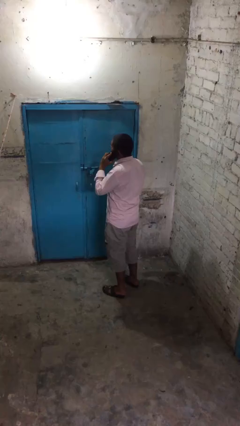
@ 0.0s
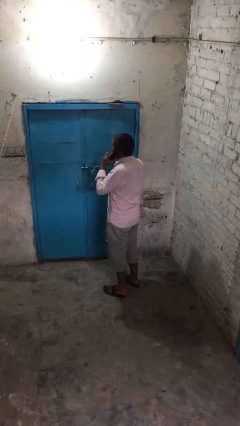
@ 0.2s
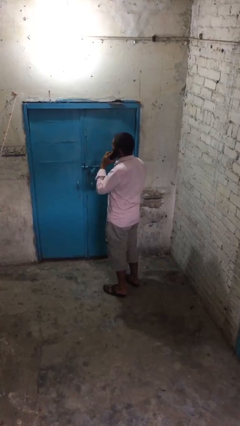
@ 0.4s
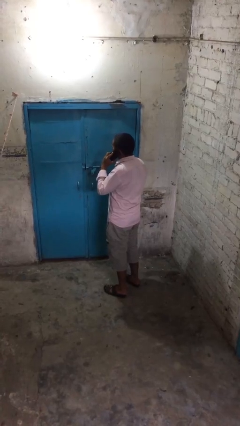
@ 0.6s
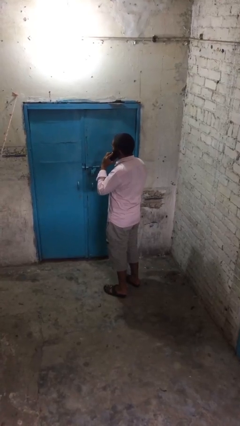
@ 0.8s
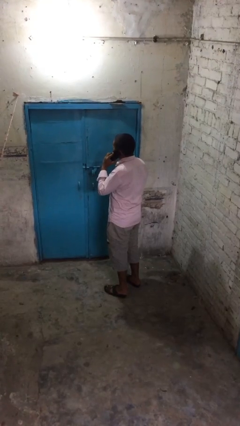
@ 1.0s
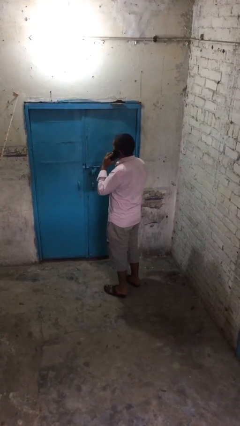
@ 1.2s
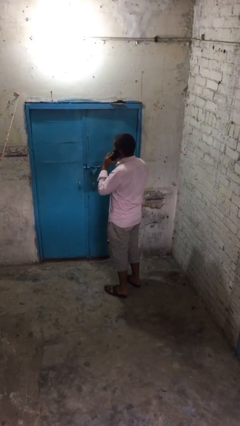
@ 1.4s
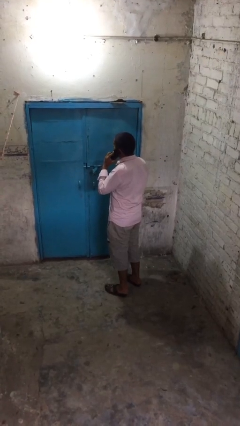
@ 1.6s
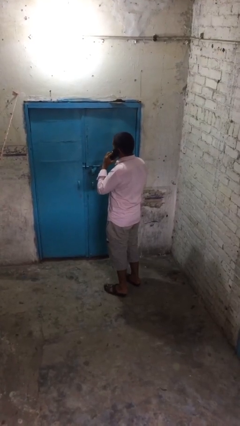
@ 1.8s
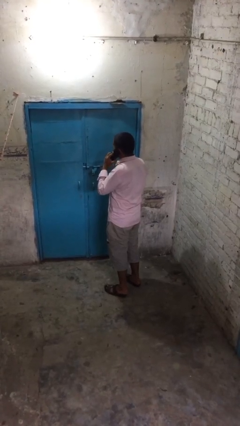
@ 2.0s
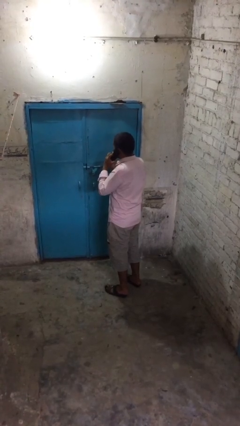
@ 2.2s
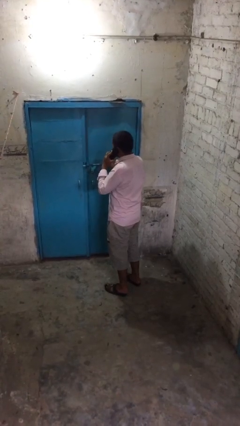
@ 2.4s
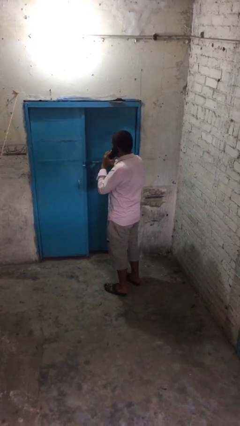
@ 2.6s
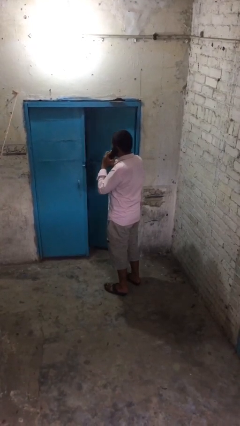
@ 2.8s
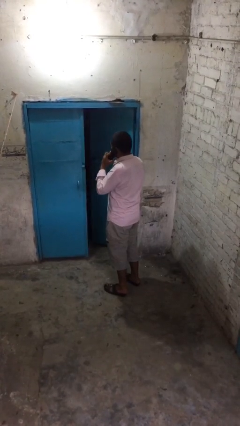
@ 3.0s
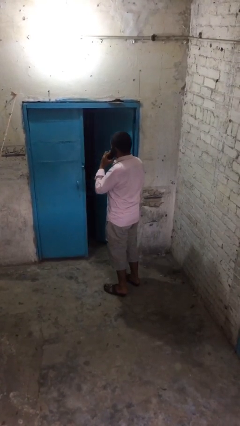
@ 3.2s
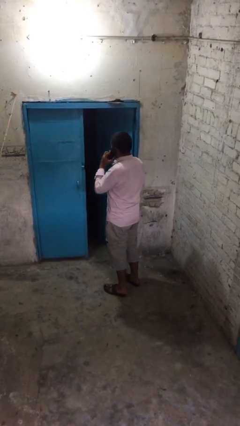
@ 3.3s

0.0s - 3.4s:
person opens facility door

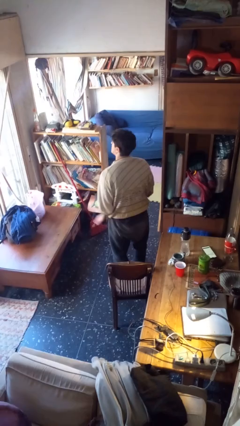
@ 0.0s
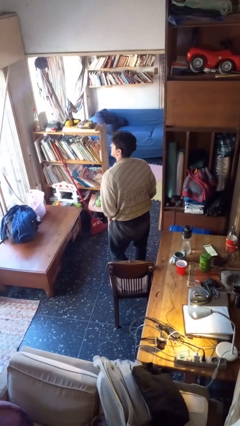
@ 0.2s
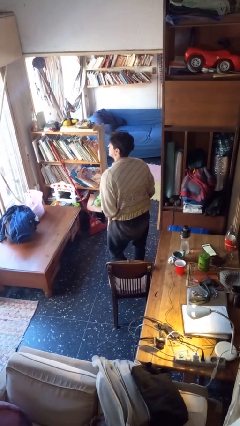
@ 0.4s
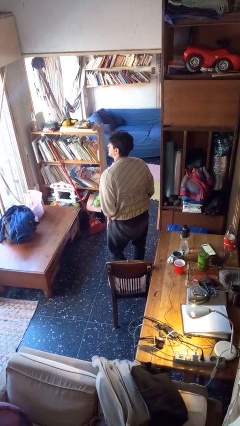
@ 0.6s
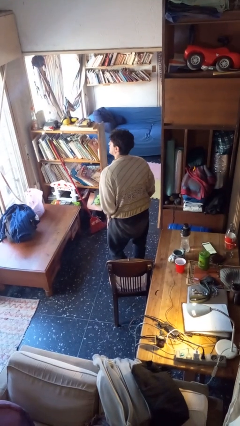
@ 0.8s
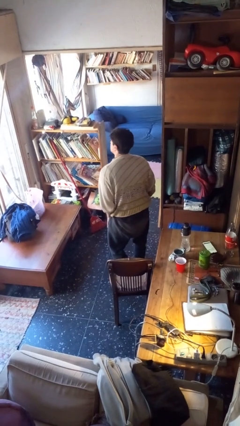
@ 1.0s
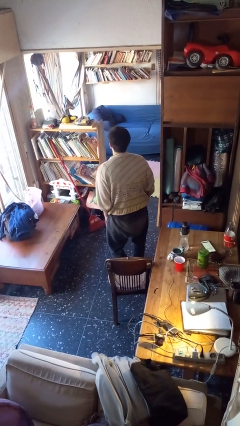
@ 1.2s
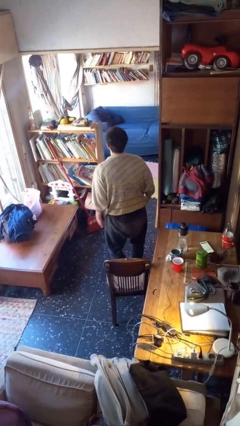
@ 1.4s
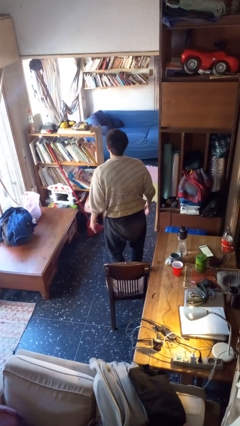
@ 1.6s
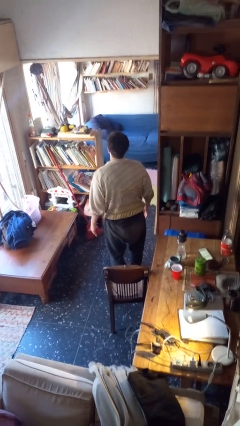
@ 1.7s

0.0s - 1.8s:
person slaps hands on thighs

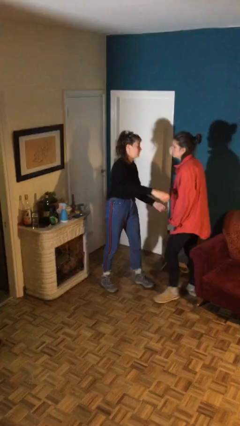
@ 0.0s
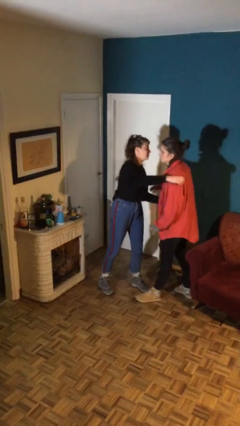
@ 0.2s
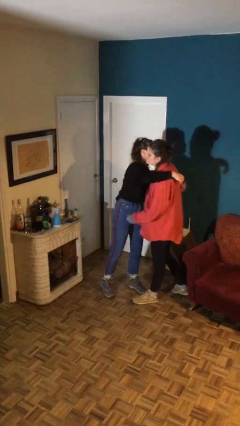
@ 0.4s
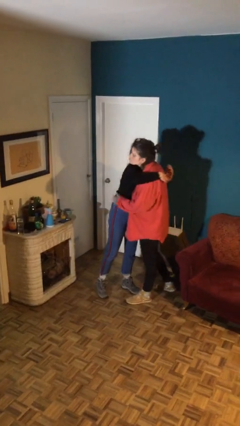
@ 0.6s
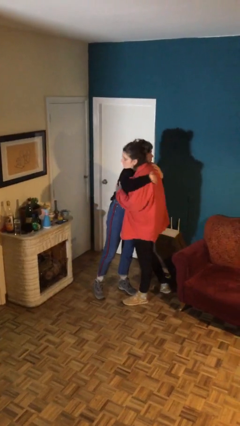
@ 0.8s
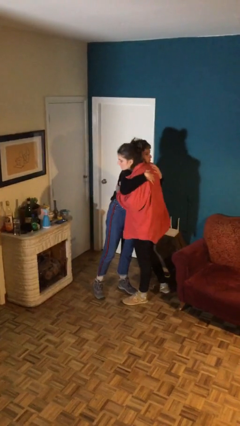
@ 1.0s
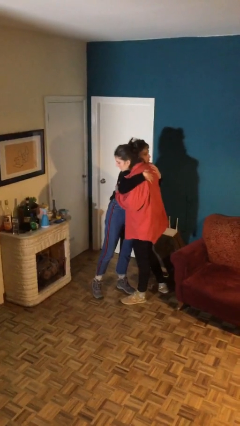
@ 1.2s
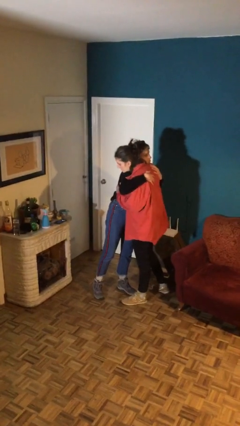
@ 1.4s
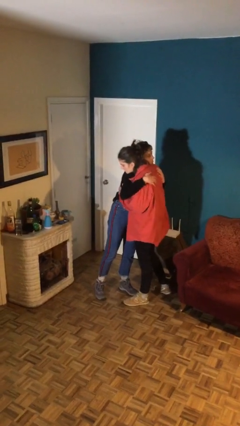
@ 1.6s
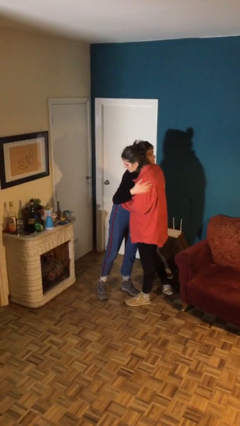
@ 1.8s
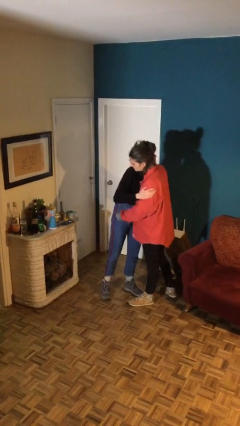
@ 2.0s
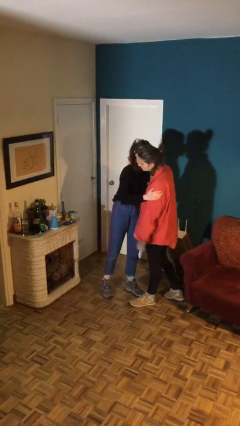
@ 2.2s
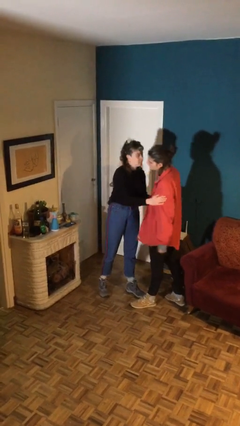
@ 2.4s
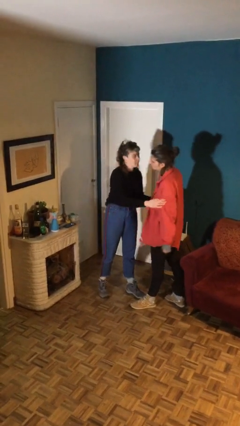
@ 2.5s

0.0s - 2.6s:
person embraces person

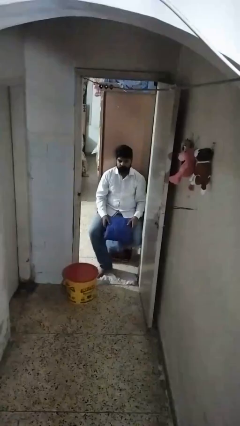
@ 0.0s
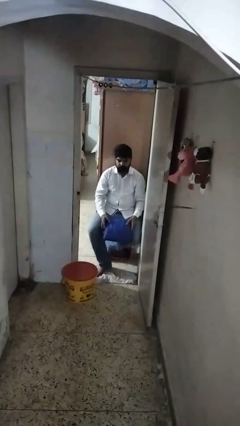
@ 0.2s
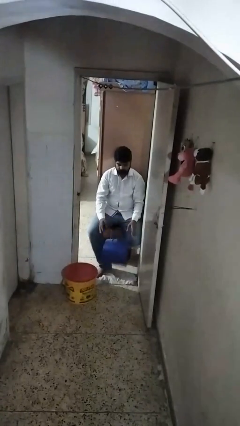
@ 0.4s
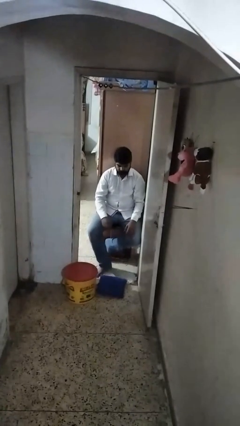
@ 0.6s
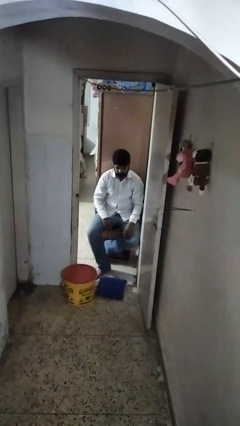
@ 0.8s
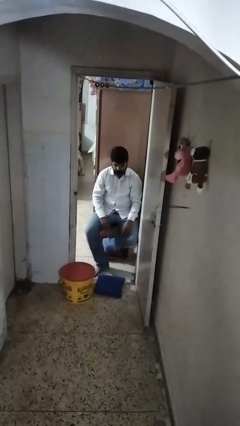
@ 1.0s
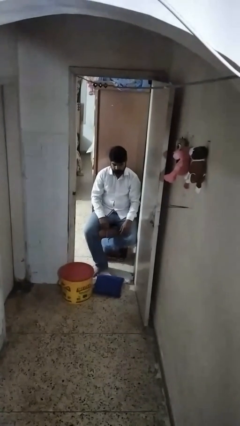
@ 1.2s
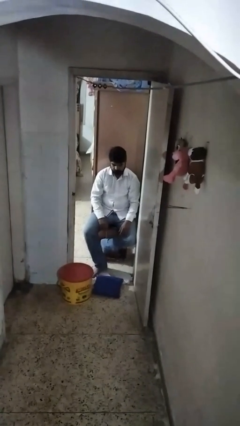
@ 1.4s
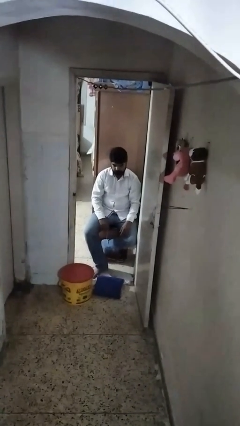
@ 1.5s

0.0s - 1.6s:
person drops object

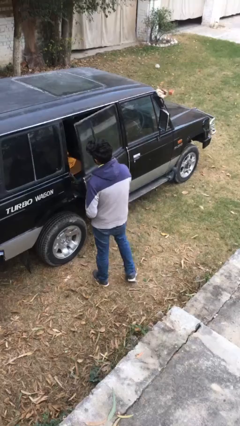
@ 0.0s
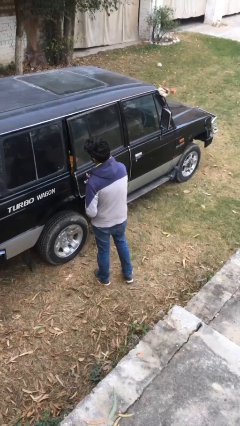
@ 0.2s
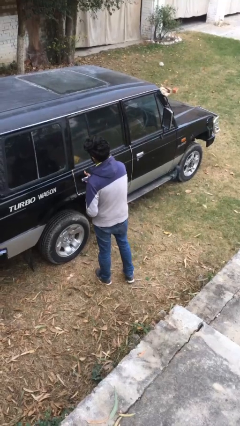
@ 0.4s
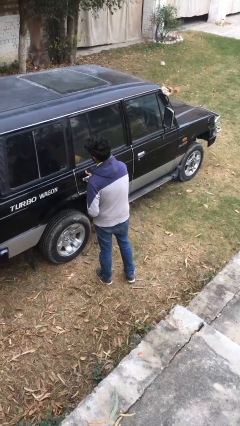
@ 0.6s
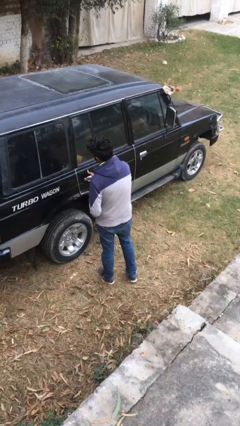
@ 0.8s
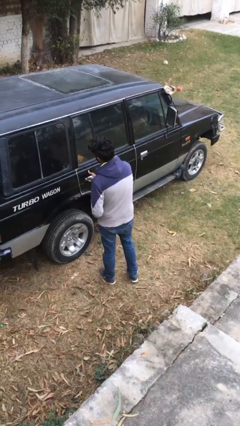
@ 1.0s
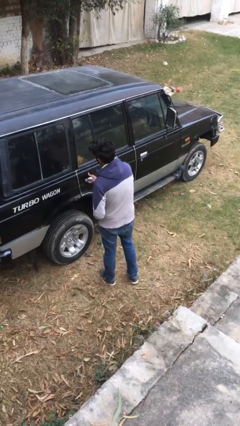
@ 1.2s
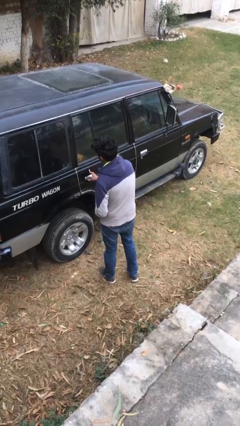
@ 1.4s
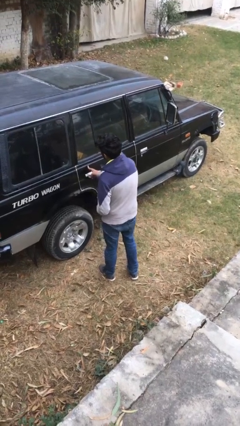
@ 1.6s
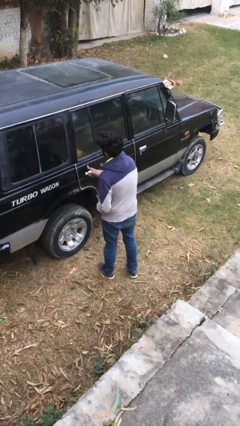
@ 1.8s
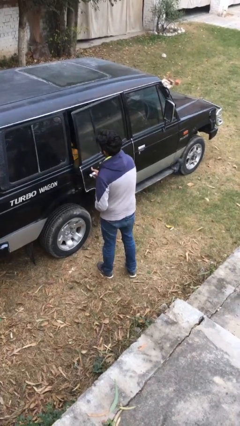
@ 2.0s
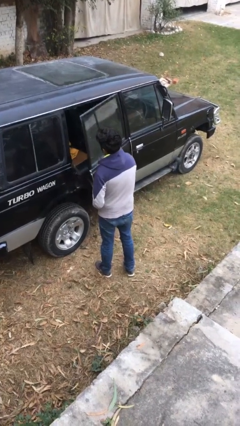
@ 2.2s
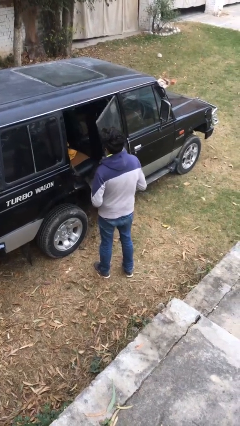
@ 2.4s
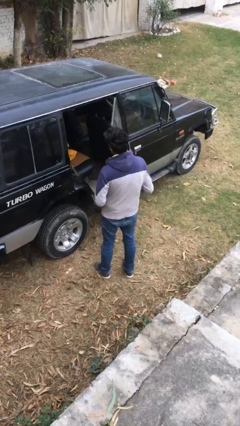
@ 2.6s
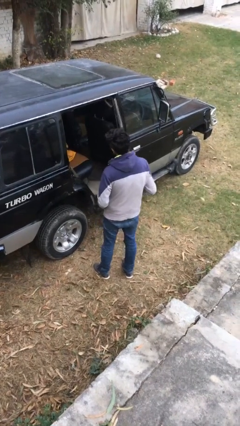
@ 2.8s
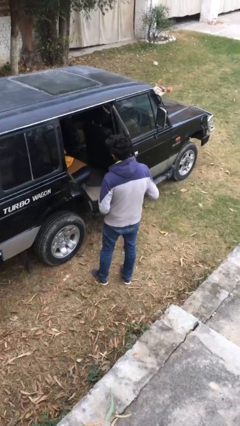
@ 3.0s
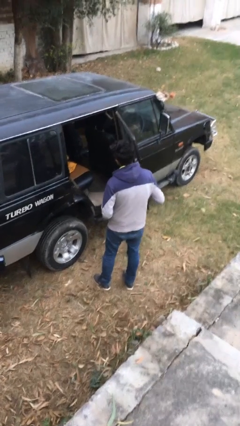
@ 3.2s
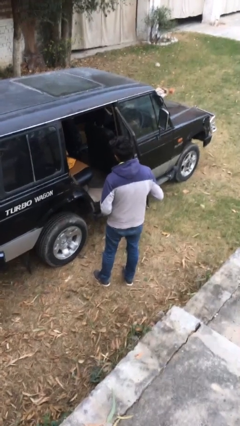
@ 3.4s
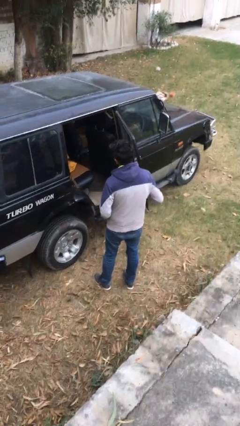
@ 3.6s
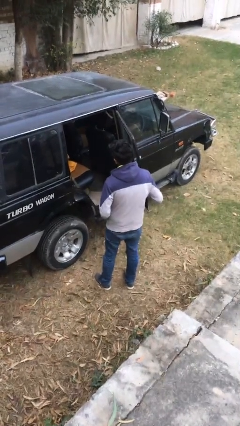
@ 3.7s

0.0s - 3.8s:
person closes car door

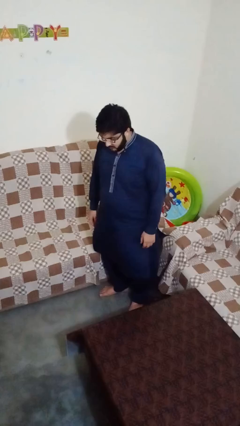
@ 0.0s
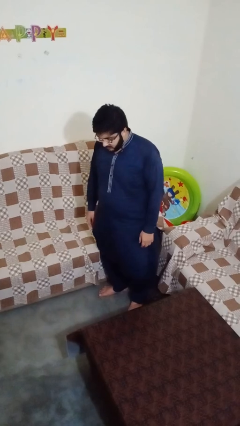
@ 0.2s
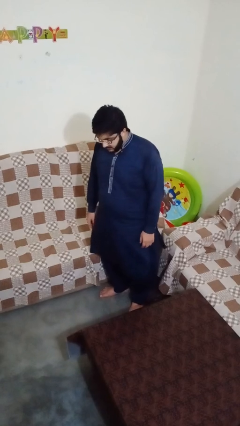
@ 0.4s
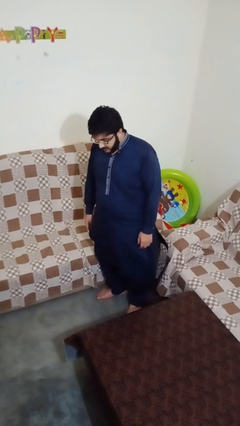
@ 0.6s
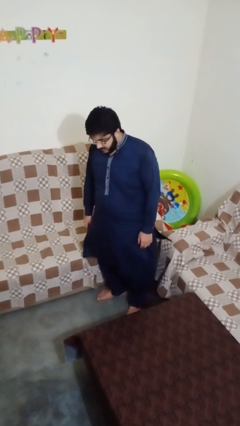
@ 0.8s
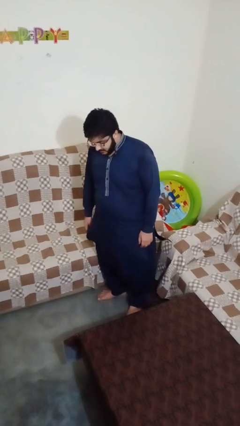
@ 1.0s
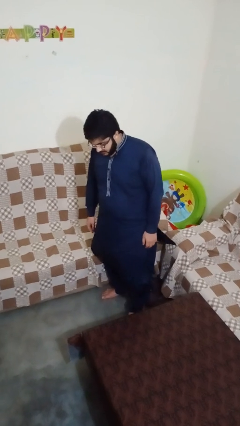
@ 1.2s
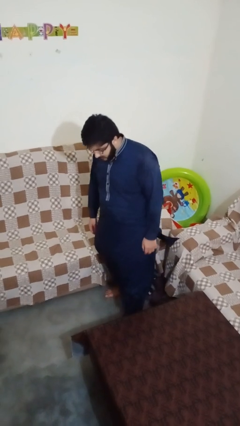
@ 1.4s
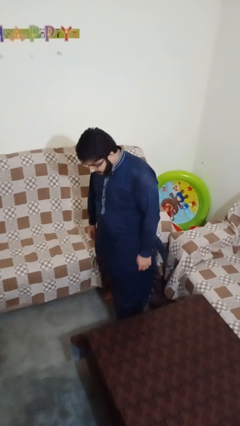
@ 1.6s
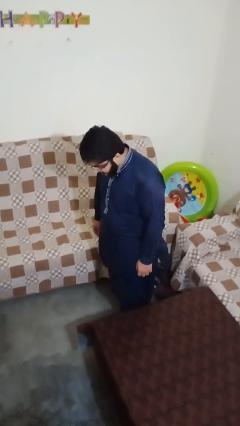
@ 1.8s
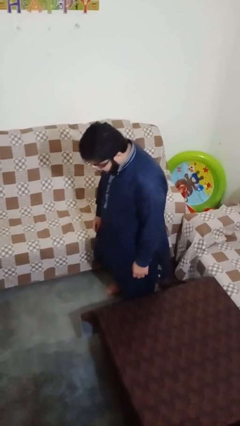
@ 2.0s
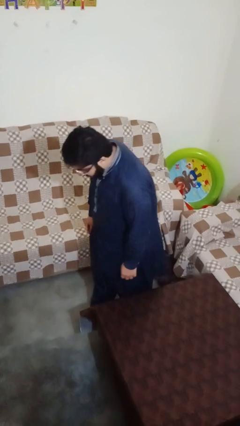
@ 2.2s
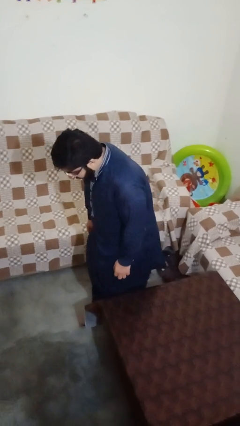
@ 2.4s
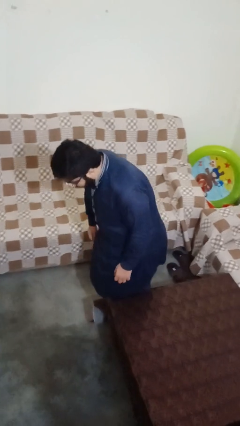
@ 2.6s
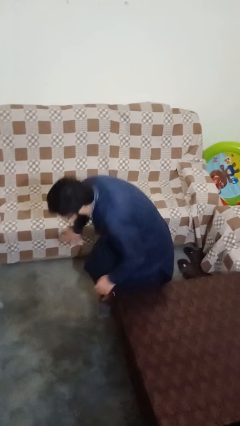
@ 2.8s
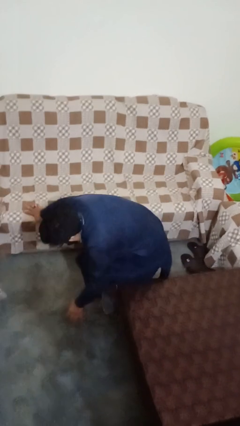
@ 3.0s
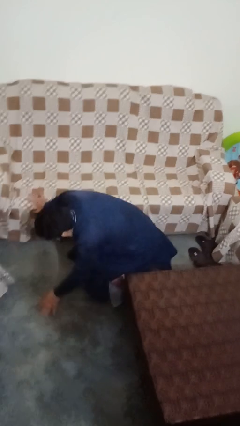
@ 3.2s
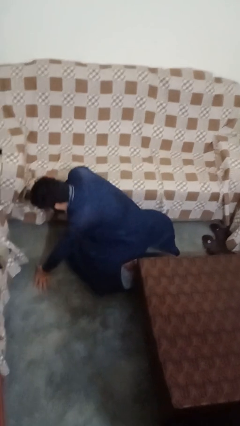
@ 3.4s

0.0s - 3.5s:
person trips on object on floor

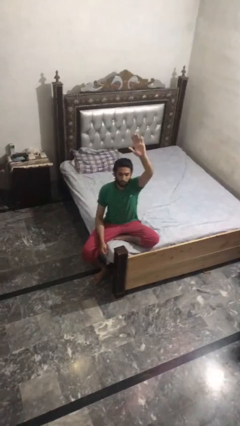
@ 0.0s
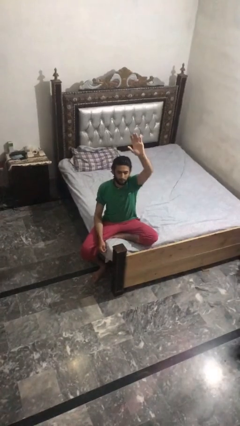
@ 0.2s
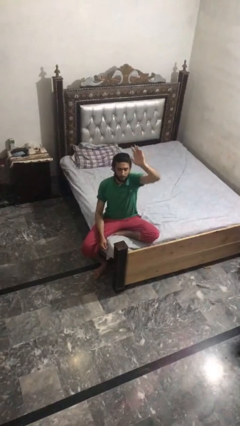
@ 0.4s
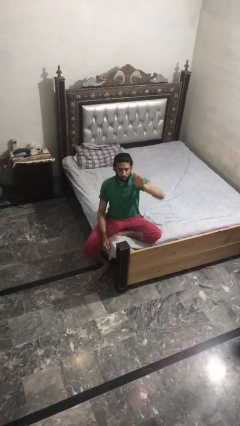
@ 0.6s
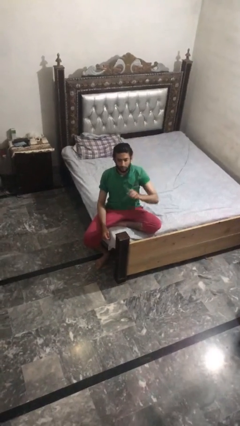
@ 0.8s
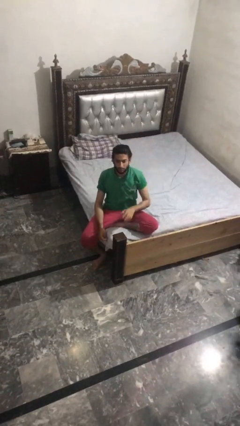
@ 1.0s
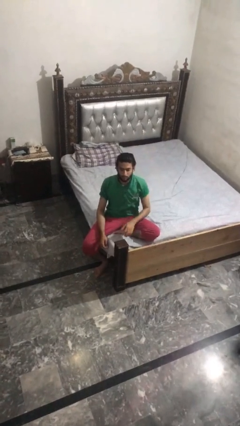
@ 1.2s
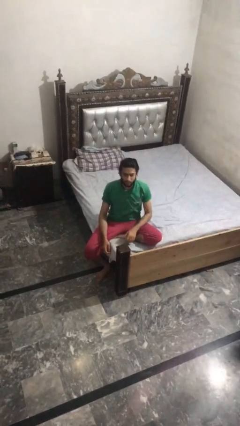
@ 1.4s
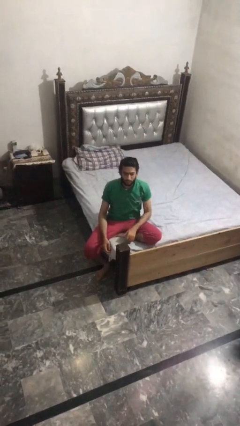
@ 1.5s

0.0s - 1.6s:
person gestures lower hand
